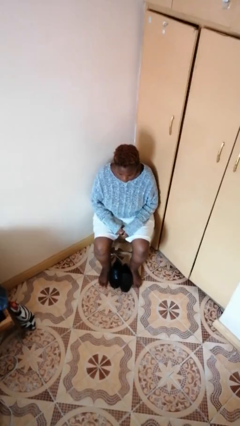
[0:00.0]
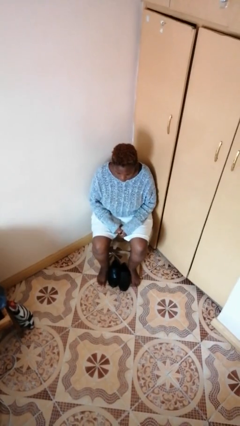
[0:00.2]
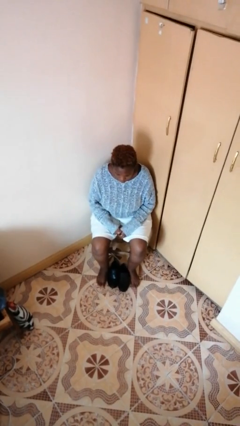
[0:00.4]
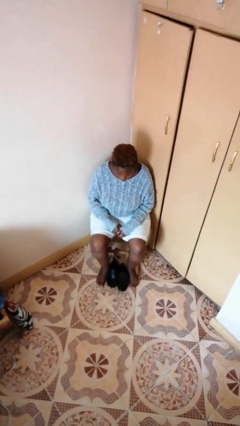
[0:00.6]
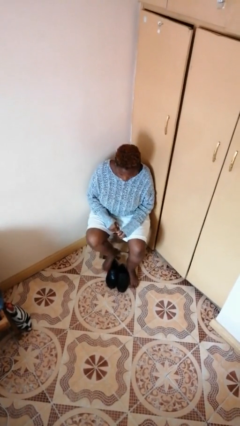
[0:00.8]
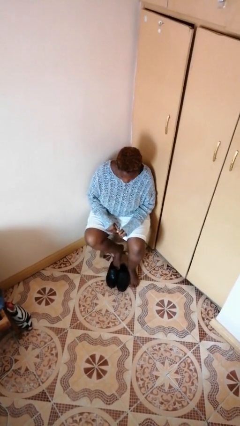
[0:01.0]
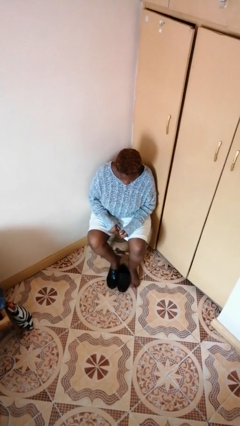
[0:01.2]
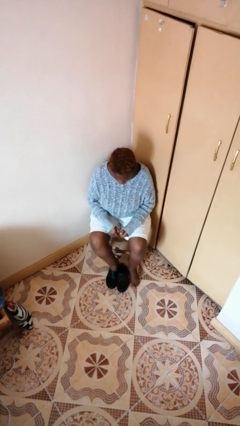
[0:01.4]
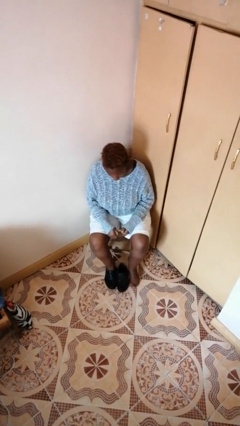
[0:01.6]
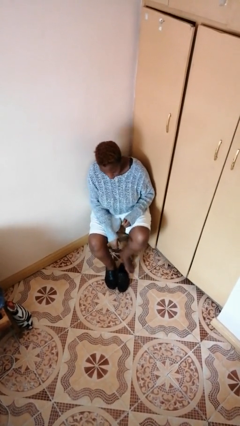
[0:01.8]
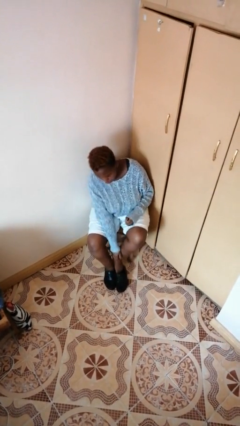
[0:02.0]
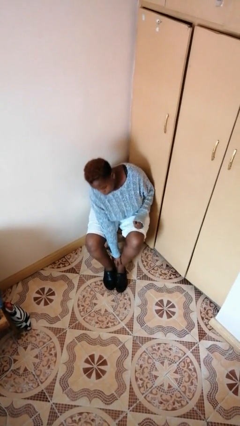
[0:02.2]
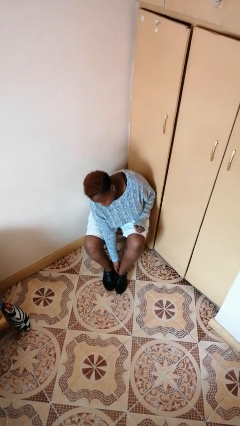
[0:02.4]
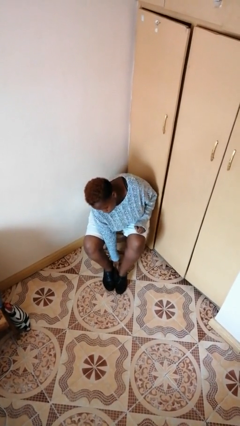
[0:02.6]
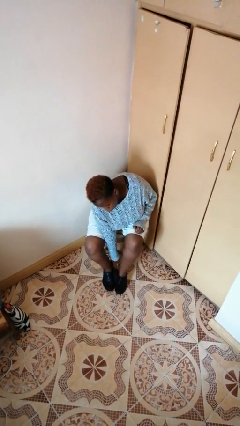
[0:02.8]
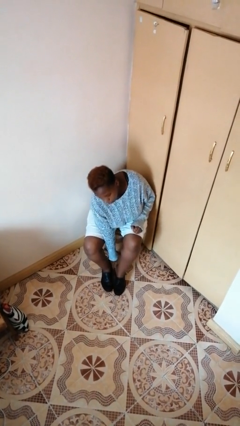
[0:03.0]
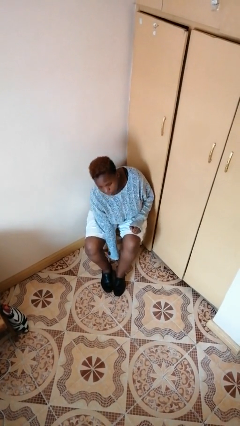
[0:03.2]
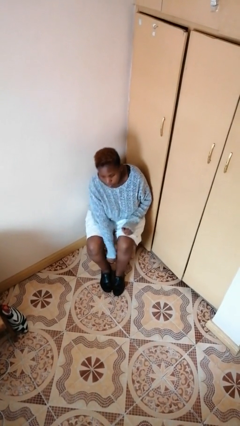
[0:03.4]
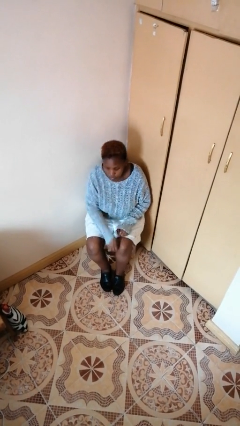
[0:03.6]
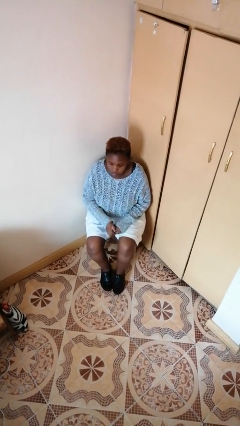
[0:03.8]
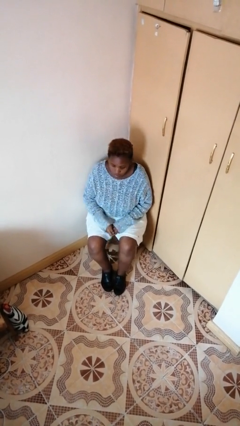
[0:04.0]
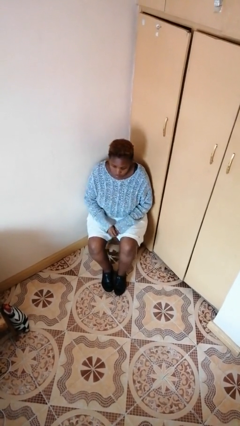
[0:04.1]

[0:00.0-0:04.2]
person puts on shoes

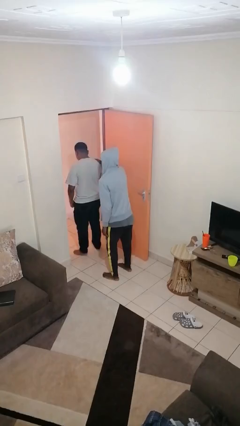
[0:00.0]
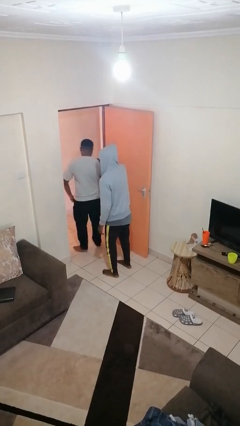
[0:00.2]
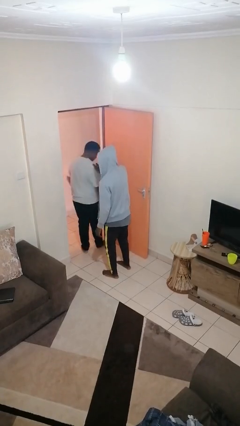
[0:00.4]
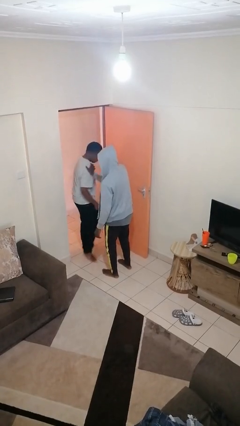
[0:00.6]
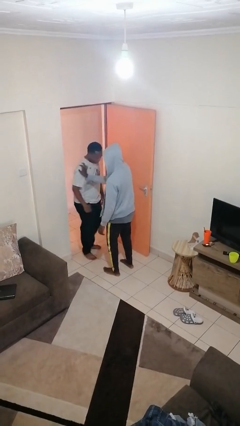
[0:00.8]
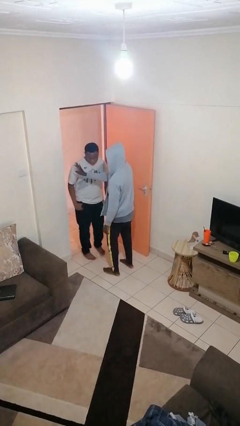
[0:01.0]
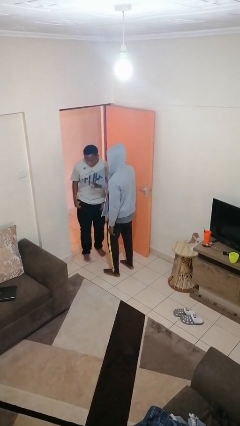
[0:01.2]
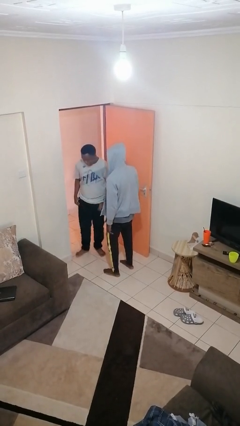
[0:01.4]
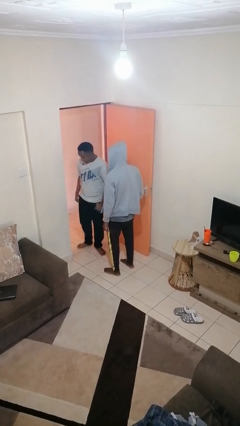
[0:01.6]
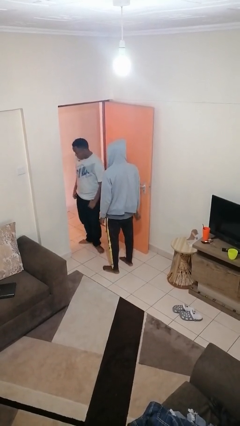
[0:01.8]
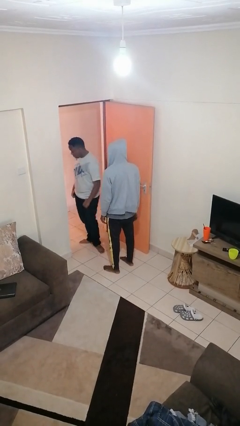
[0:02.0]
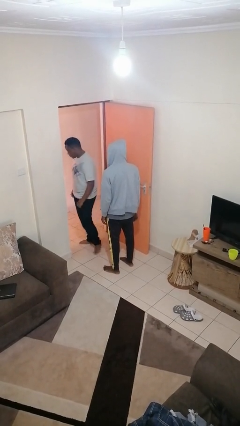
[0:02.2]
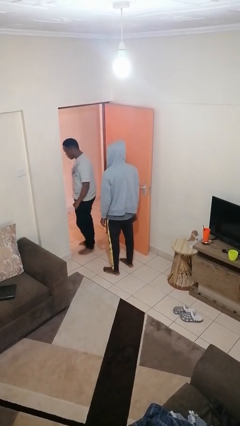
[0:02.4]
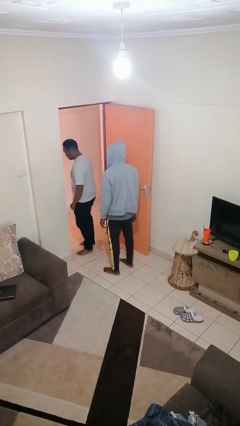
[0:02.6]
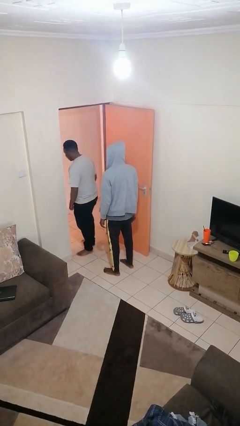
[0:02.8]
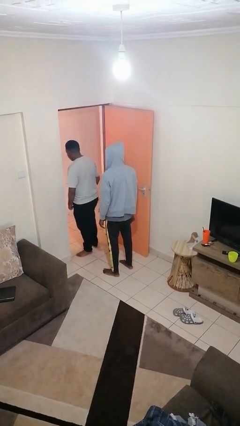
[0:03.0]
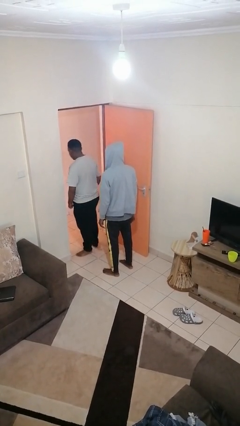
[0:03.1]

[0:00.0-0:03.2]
person spins person around

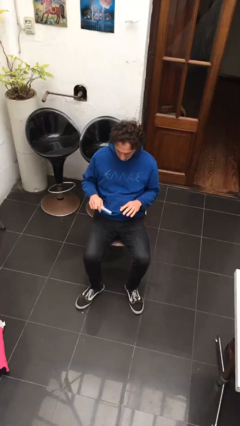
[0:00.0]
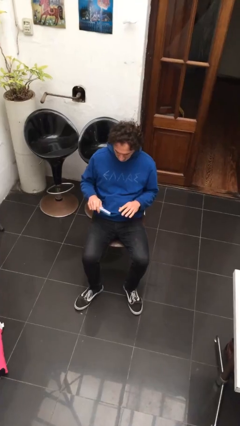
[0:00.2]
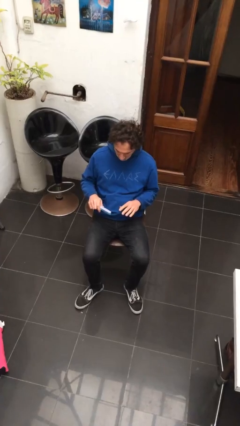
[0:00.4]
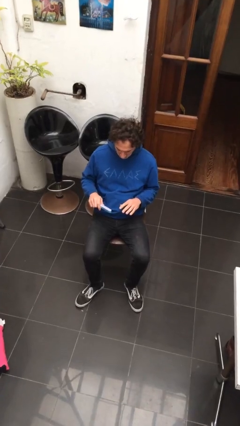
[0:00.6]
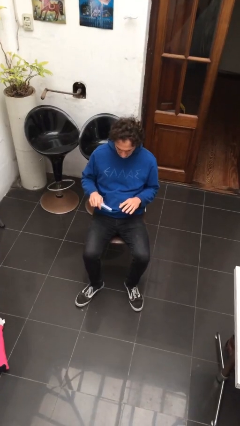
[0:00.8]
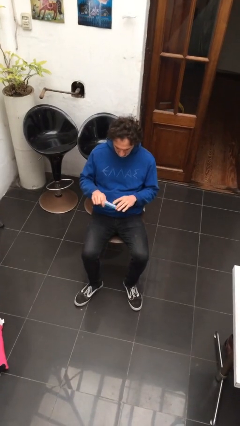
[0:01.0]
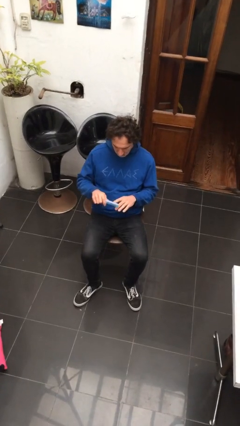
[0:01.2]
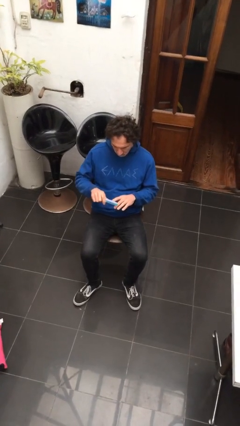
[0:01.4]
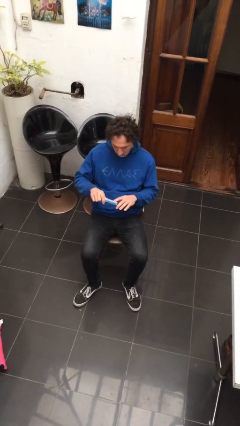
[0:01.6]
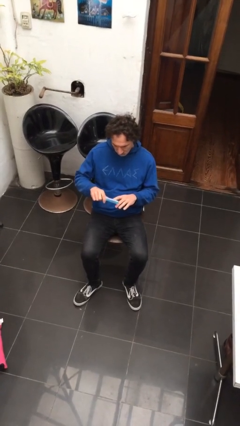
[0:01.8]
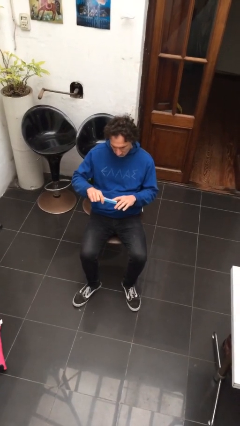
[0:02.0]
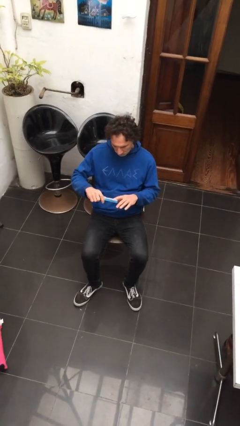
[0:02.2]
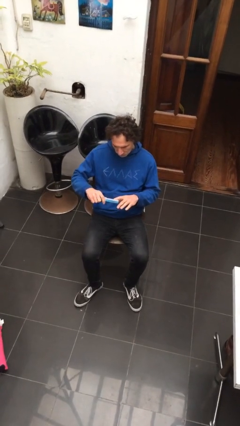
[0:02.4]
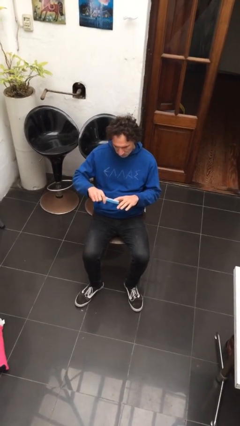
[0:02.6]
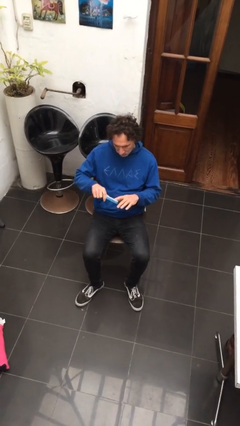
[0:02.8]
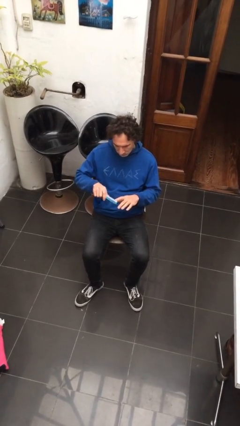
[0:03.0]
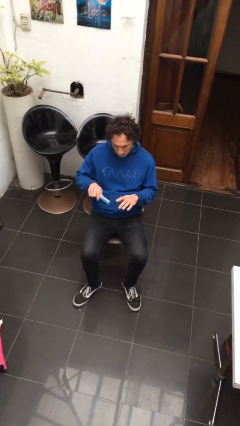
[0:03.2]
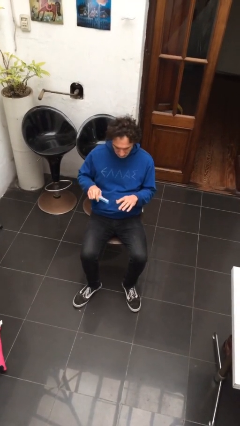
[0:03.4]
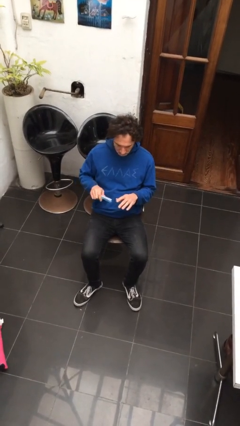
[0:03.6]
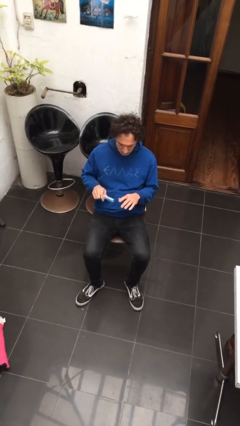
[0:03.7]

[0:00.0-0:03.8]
person files fingernails

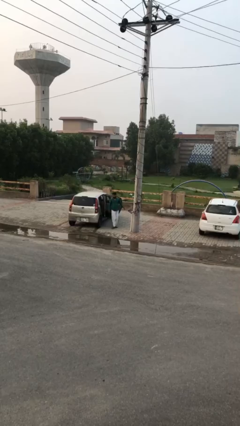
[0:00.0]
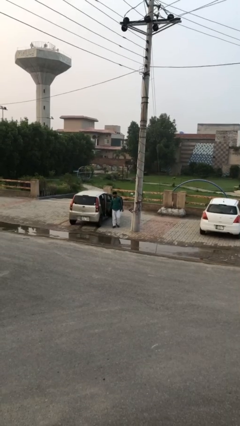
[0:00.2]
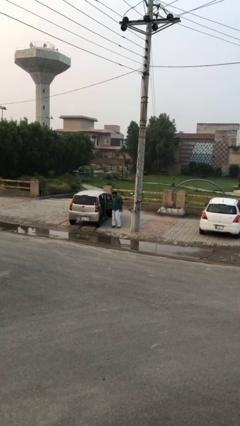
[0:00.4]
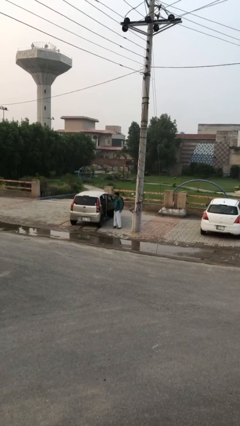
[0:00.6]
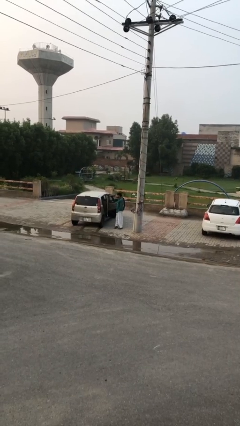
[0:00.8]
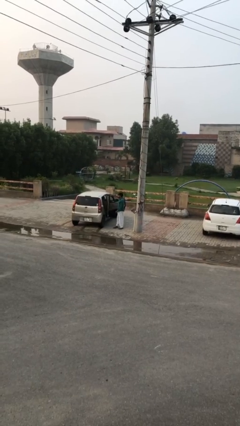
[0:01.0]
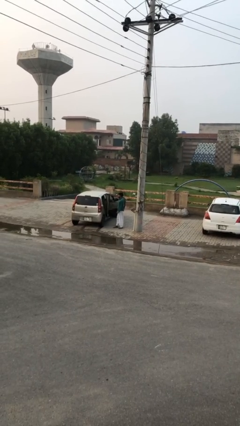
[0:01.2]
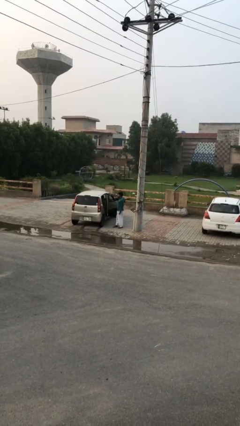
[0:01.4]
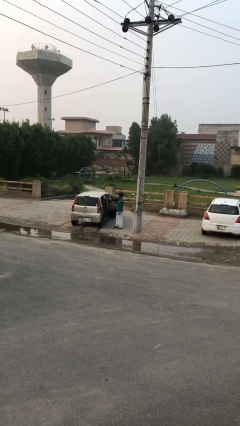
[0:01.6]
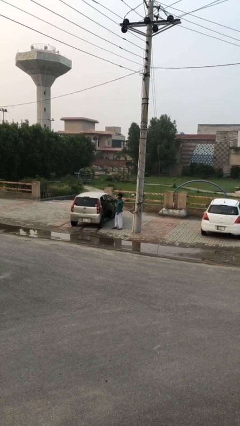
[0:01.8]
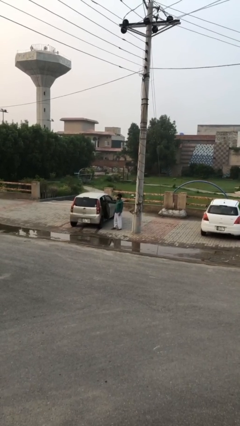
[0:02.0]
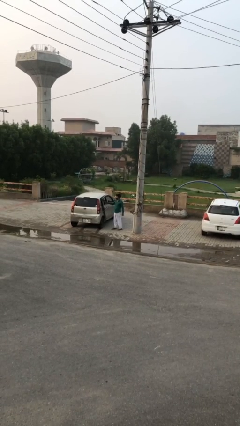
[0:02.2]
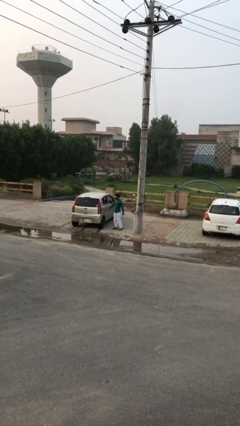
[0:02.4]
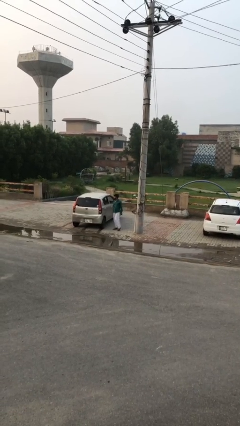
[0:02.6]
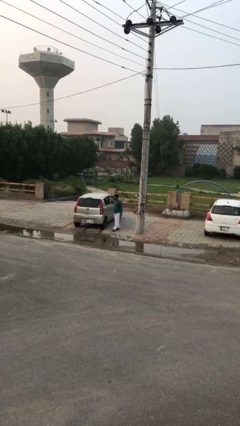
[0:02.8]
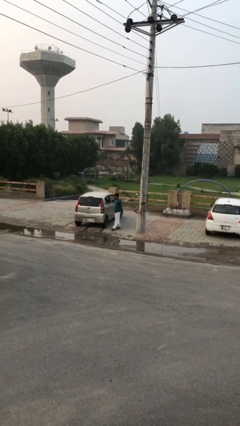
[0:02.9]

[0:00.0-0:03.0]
person closes car door

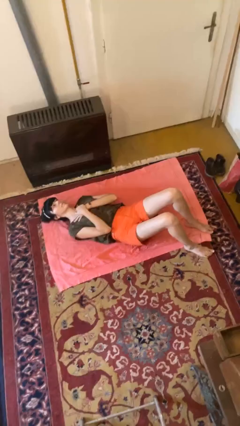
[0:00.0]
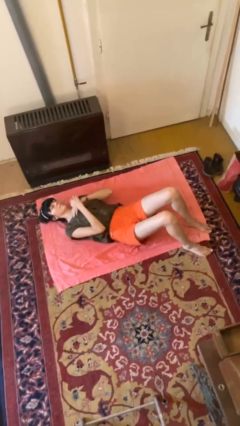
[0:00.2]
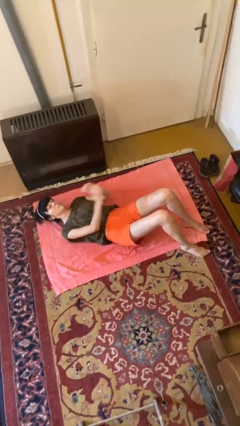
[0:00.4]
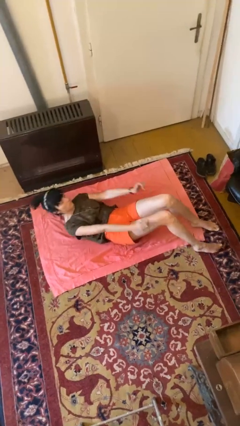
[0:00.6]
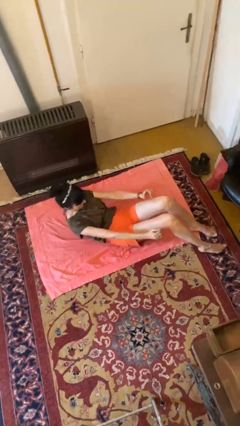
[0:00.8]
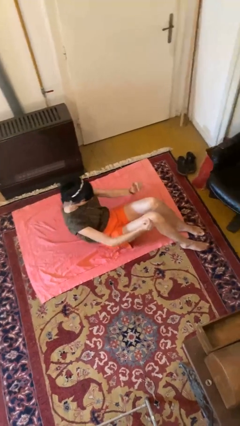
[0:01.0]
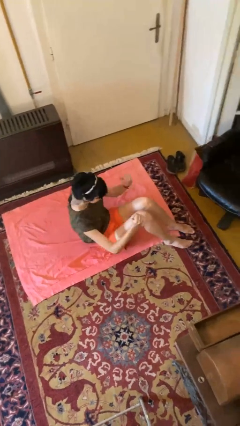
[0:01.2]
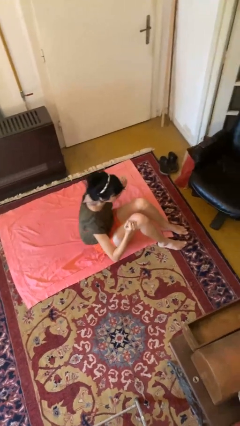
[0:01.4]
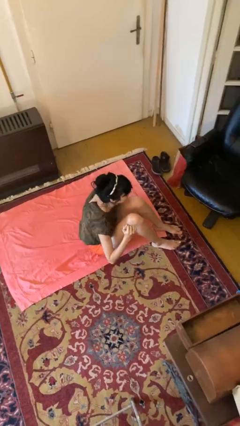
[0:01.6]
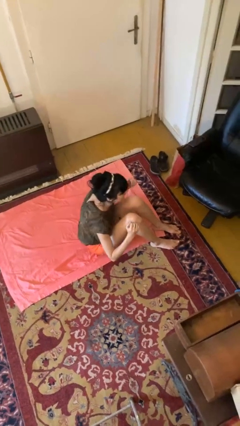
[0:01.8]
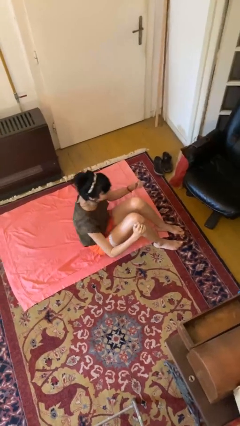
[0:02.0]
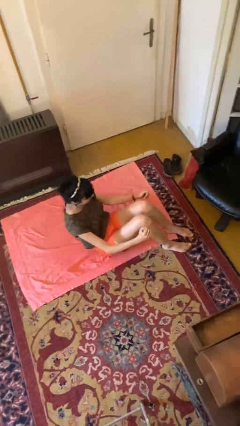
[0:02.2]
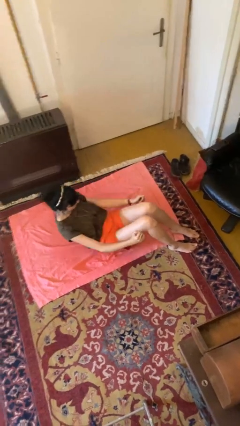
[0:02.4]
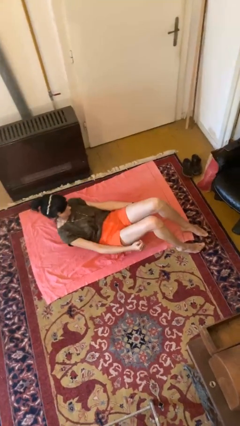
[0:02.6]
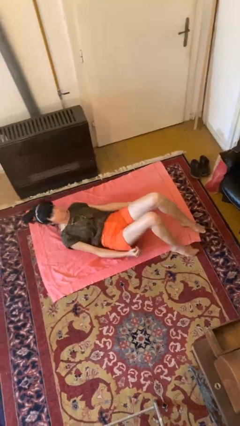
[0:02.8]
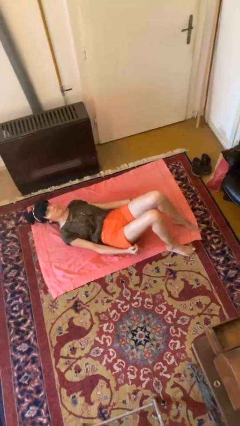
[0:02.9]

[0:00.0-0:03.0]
person exercises with situp

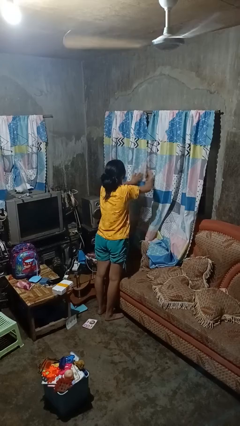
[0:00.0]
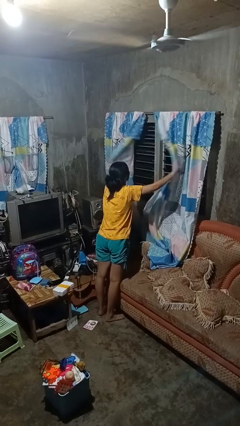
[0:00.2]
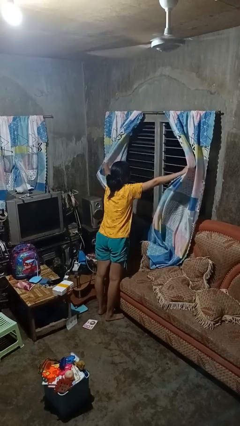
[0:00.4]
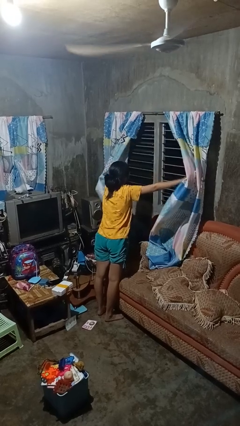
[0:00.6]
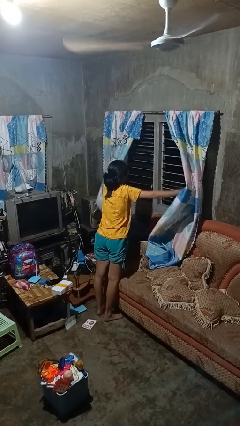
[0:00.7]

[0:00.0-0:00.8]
person opens curtains
